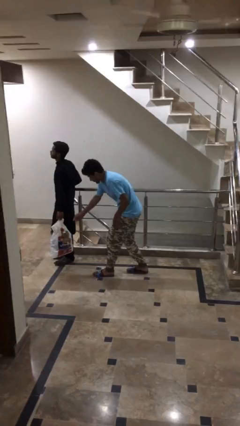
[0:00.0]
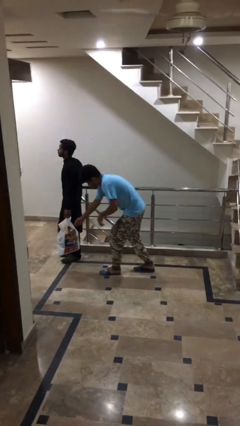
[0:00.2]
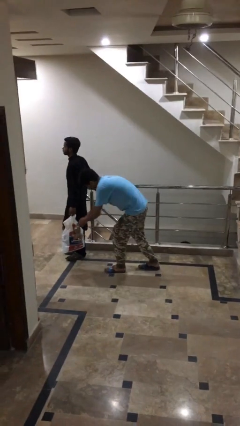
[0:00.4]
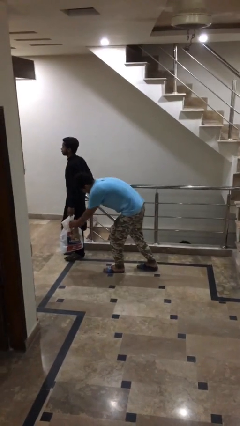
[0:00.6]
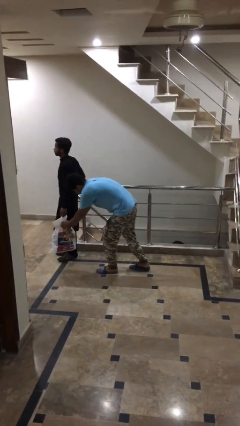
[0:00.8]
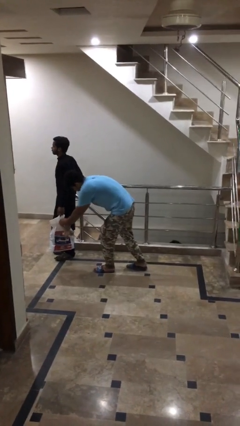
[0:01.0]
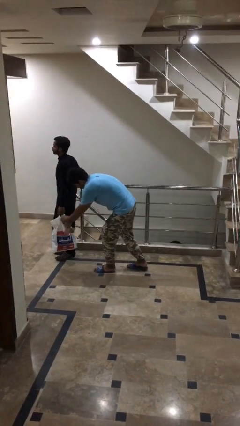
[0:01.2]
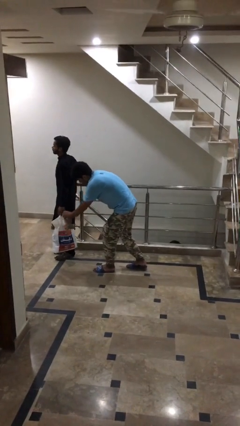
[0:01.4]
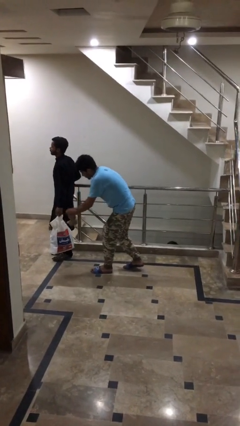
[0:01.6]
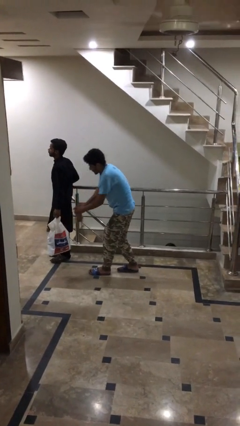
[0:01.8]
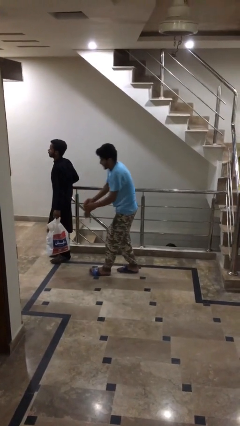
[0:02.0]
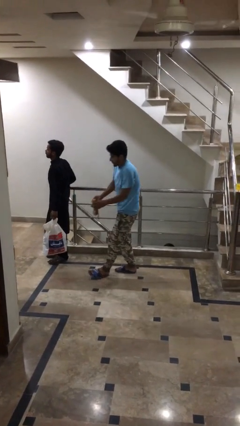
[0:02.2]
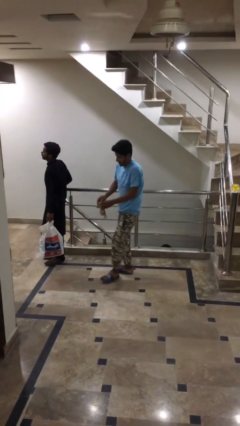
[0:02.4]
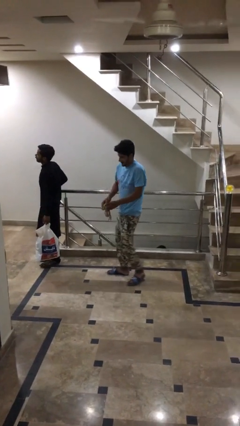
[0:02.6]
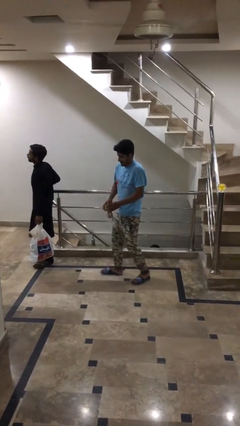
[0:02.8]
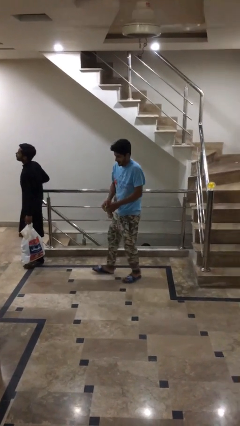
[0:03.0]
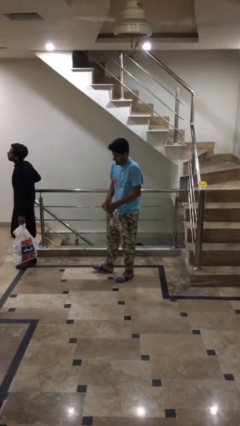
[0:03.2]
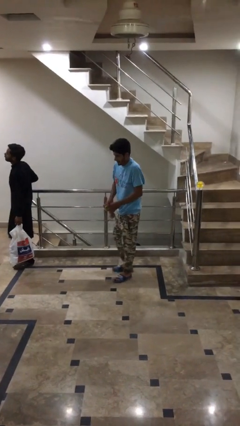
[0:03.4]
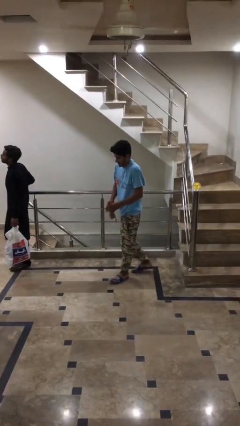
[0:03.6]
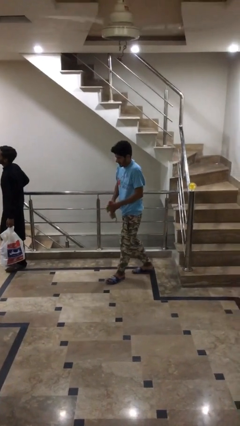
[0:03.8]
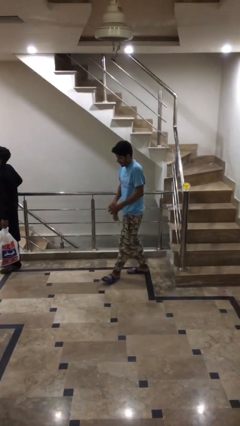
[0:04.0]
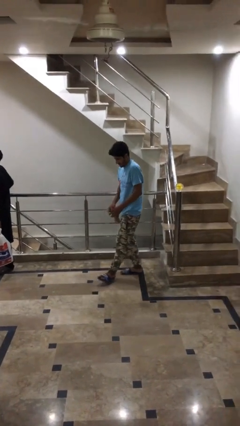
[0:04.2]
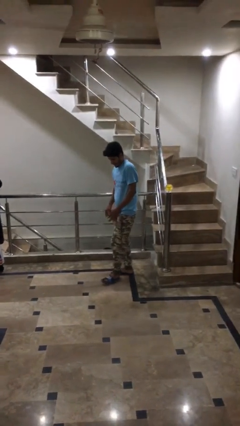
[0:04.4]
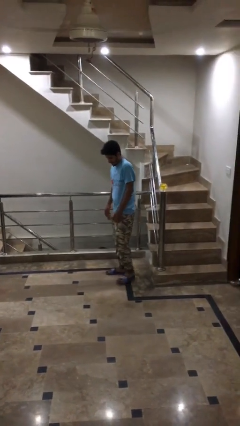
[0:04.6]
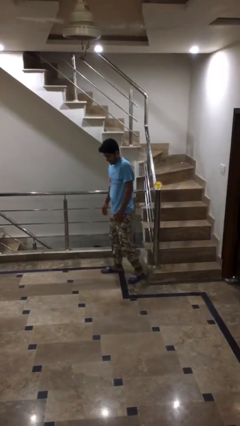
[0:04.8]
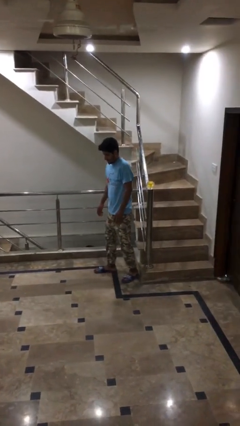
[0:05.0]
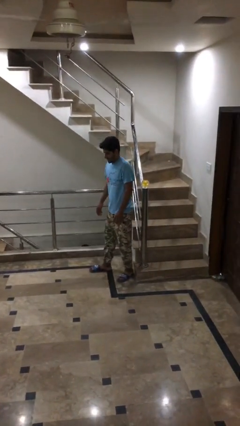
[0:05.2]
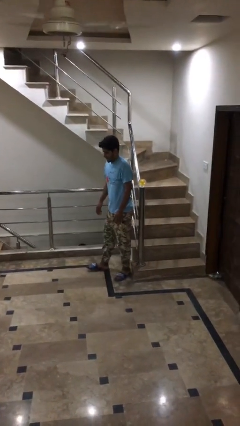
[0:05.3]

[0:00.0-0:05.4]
person steals object from person

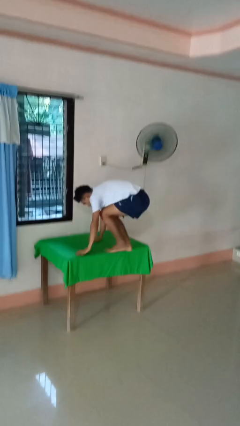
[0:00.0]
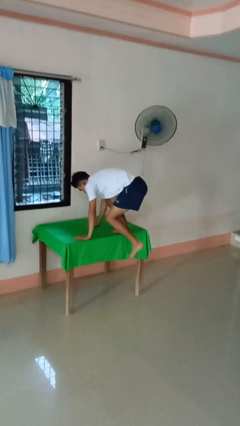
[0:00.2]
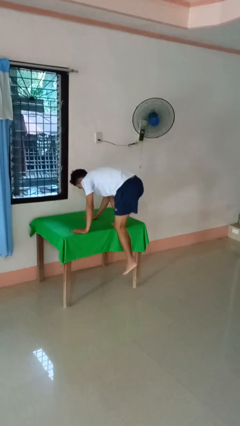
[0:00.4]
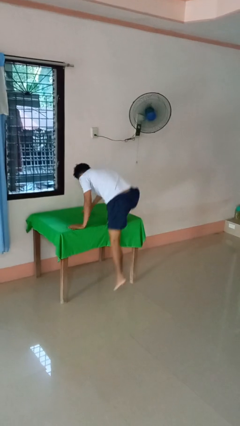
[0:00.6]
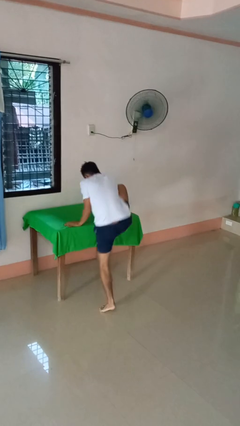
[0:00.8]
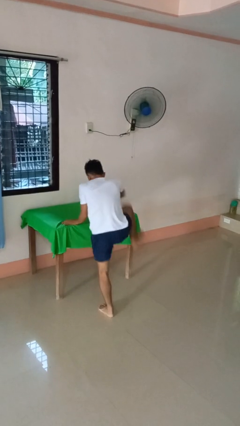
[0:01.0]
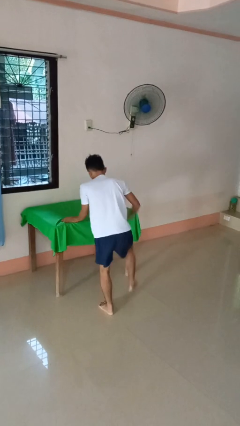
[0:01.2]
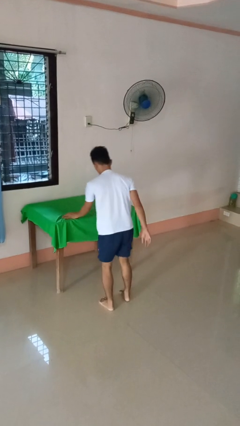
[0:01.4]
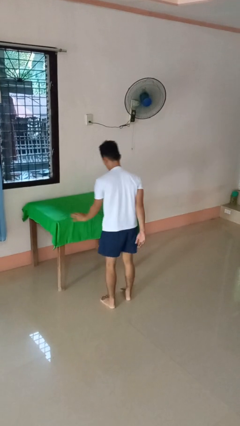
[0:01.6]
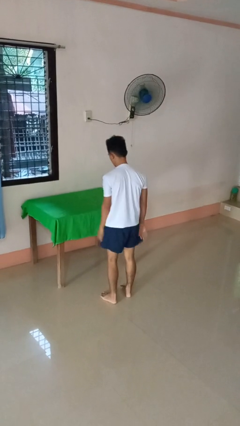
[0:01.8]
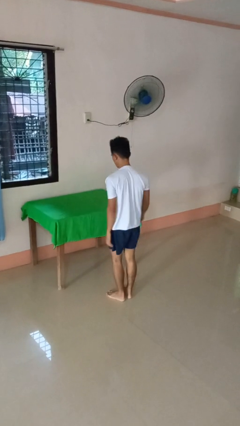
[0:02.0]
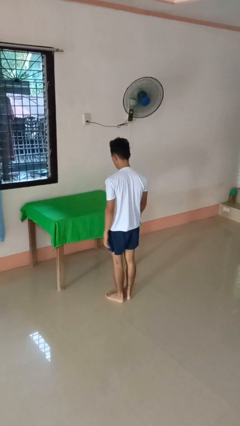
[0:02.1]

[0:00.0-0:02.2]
person climbs off table

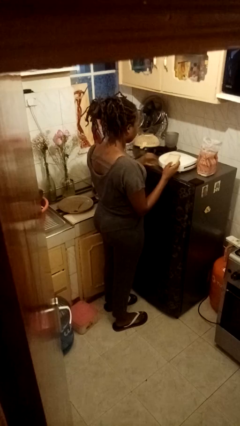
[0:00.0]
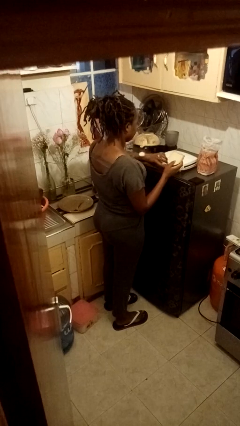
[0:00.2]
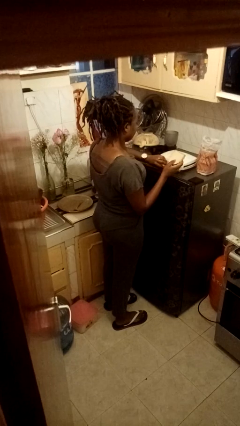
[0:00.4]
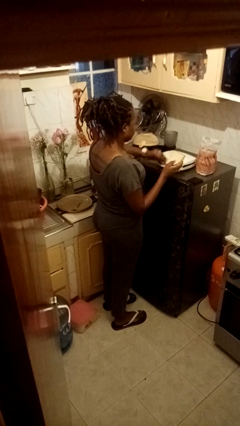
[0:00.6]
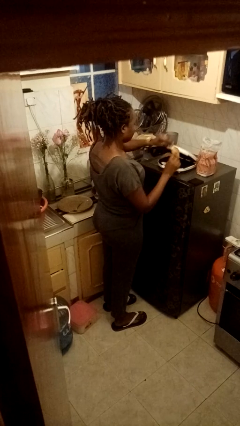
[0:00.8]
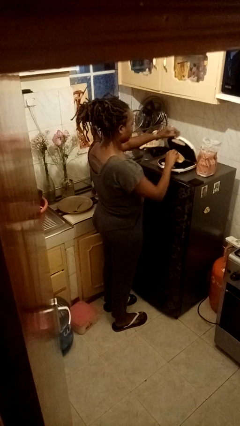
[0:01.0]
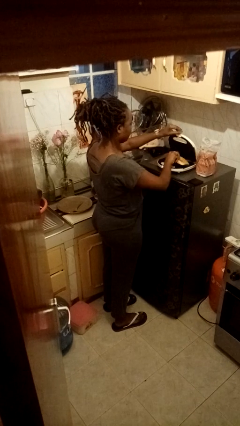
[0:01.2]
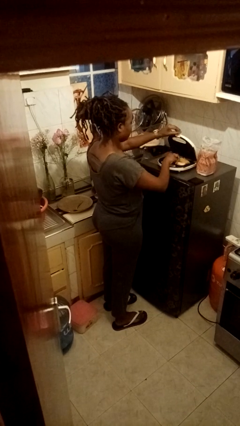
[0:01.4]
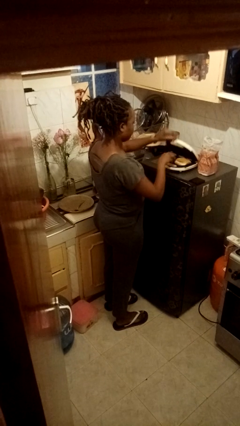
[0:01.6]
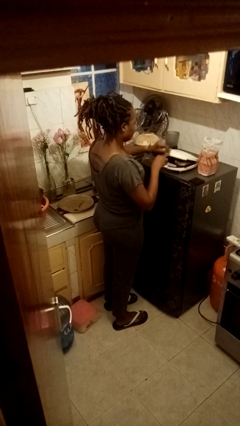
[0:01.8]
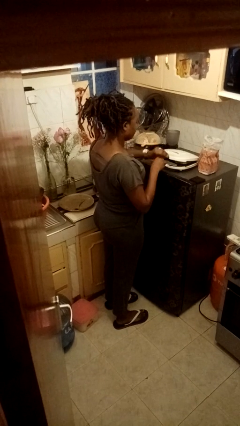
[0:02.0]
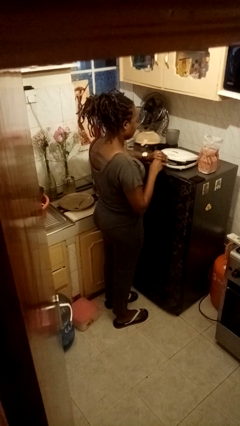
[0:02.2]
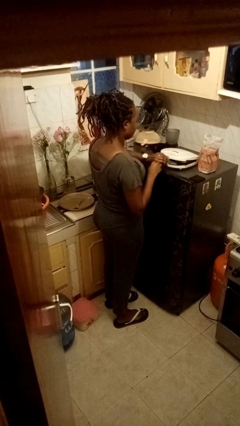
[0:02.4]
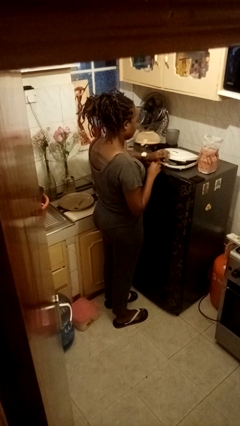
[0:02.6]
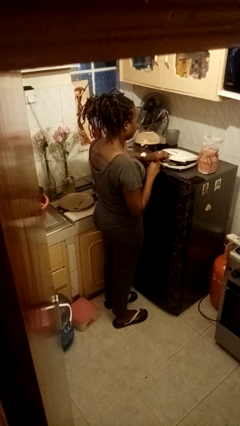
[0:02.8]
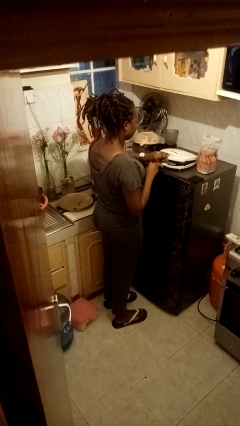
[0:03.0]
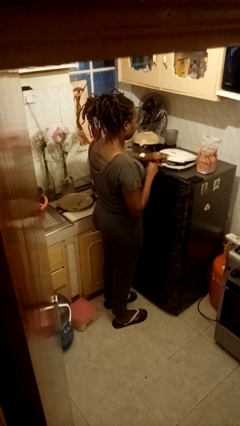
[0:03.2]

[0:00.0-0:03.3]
person puts object into toaster

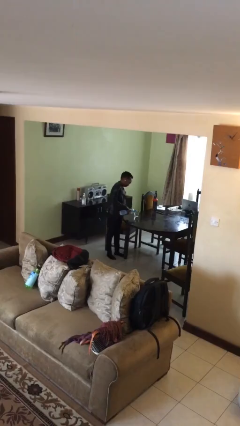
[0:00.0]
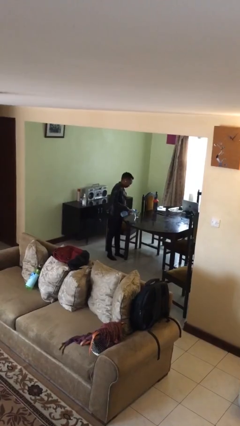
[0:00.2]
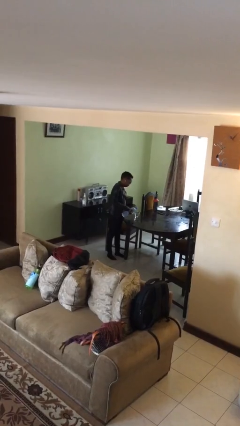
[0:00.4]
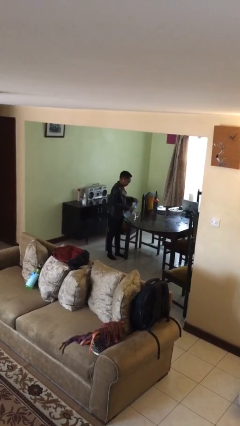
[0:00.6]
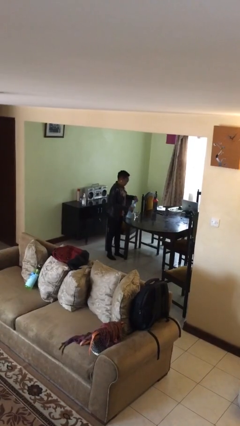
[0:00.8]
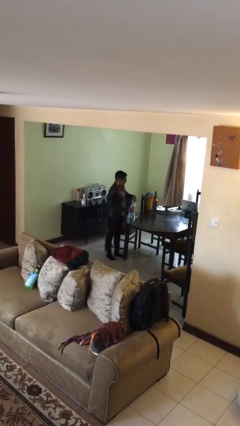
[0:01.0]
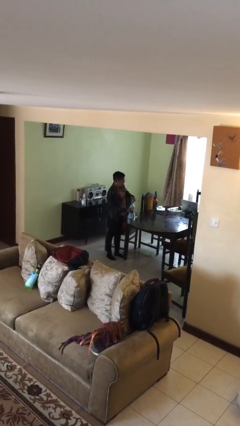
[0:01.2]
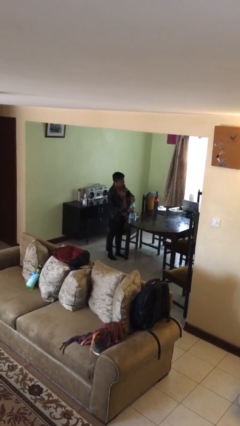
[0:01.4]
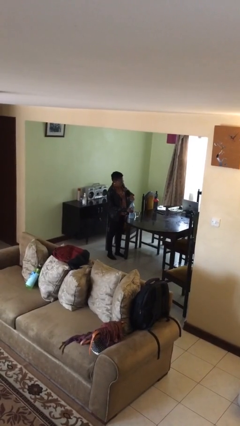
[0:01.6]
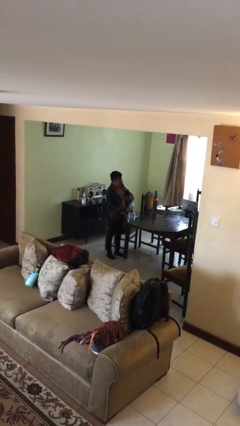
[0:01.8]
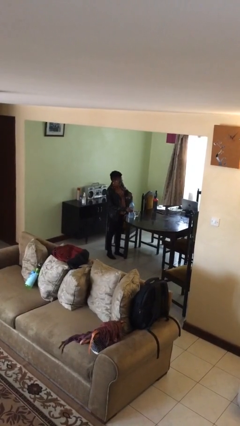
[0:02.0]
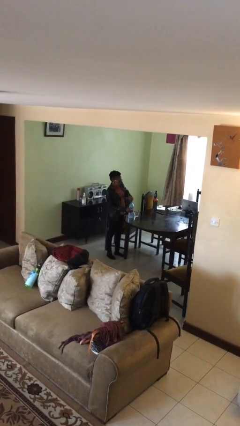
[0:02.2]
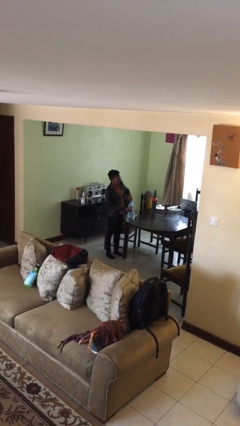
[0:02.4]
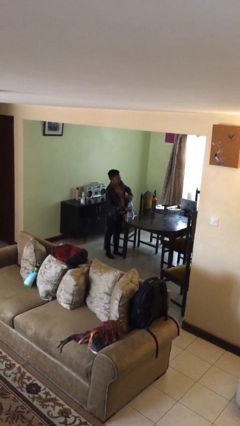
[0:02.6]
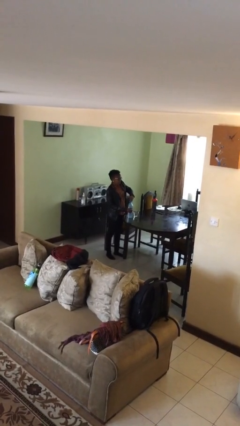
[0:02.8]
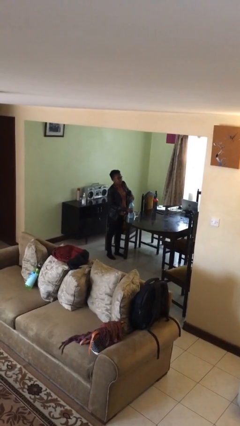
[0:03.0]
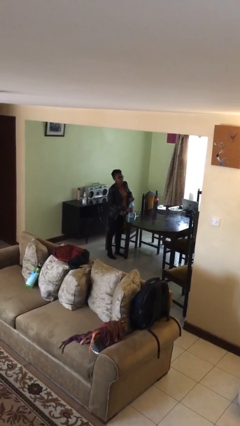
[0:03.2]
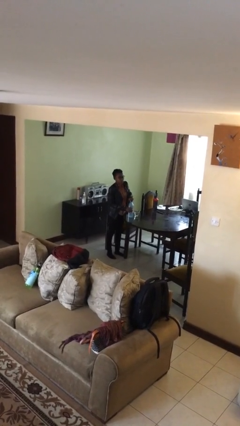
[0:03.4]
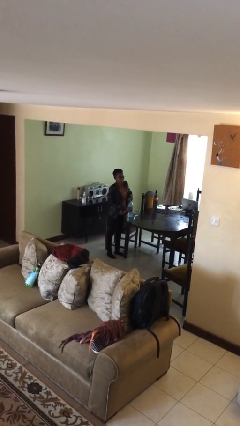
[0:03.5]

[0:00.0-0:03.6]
person screws lid to bottle

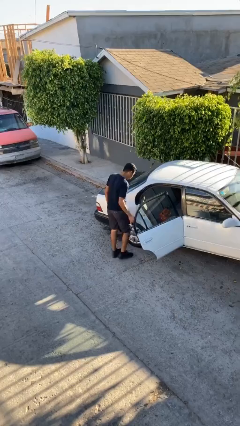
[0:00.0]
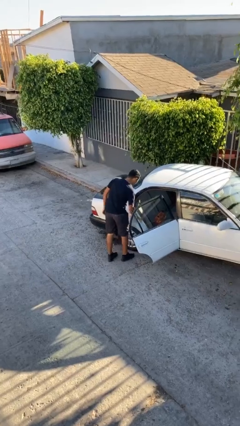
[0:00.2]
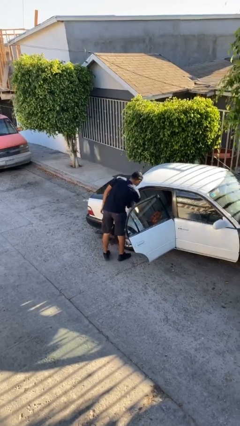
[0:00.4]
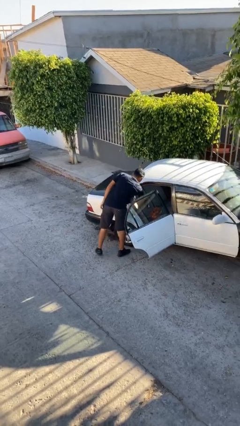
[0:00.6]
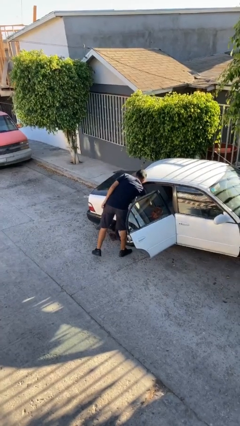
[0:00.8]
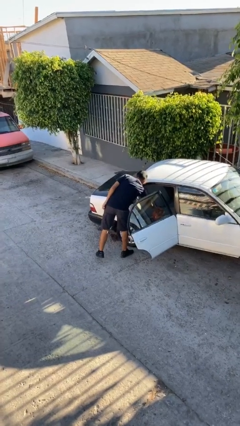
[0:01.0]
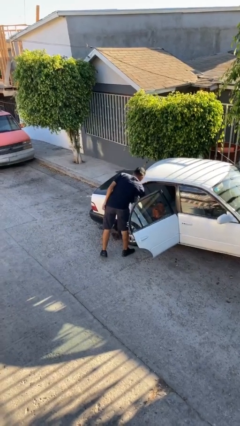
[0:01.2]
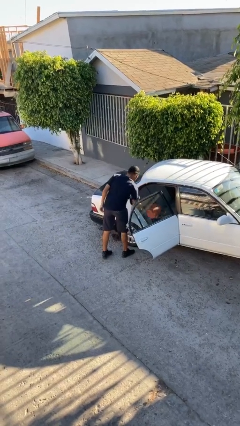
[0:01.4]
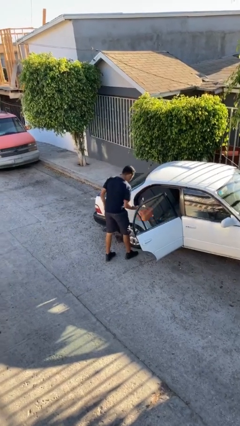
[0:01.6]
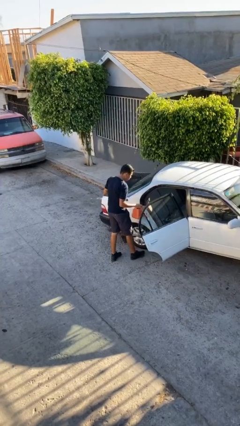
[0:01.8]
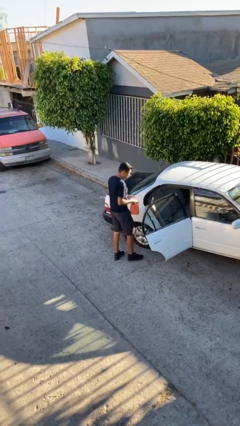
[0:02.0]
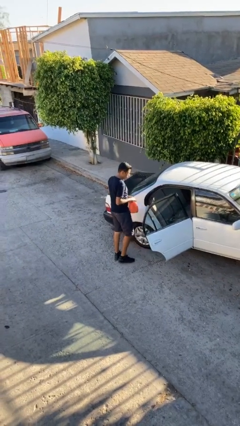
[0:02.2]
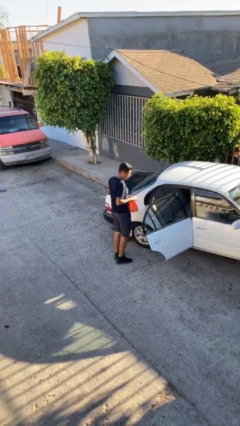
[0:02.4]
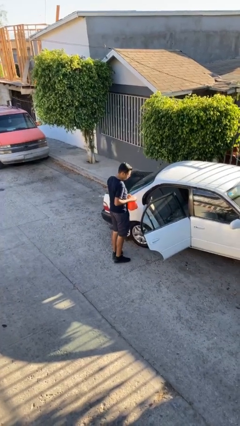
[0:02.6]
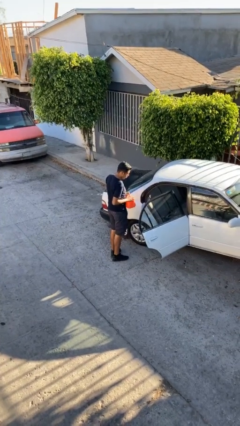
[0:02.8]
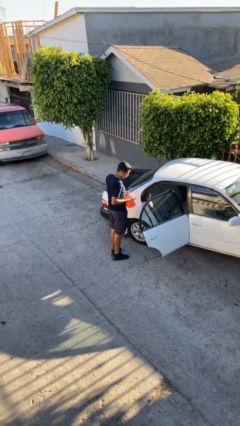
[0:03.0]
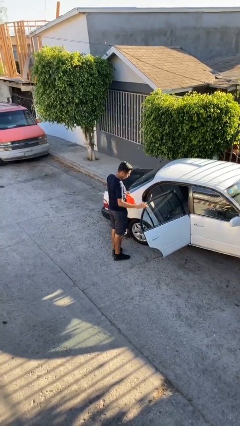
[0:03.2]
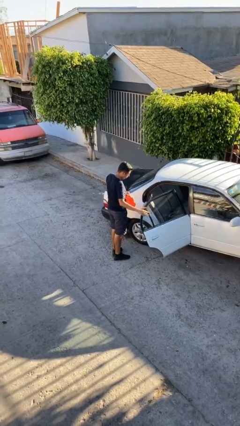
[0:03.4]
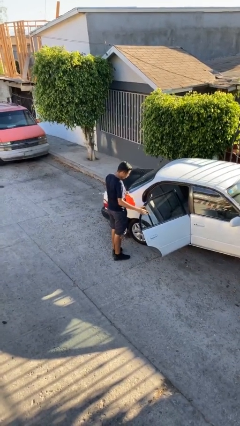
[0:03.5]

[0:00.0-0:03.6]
person unloads car
